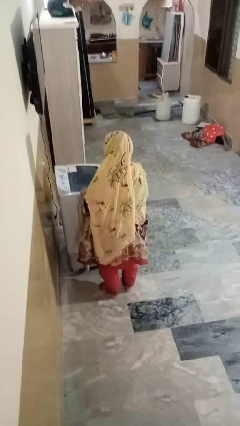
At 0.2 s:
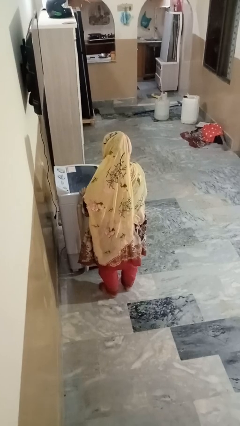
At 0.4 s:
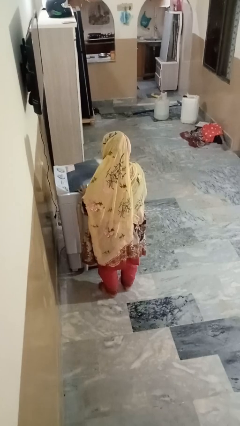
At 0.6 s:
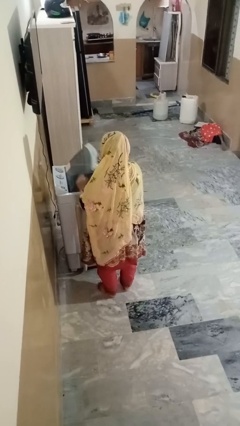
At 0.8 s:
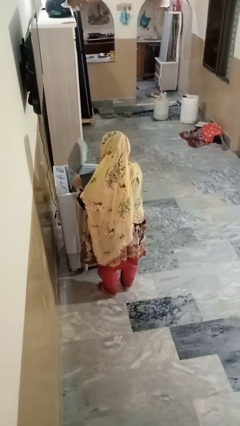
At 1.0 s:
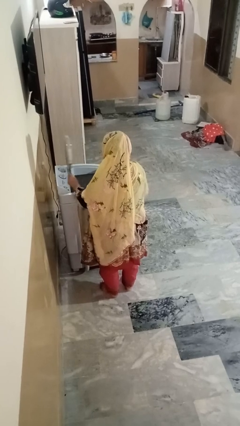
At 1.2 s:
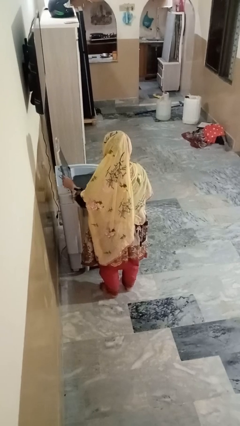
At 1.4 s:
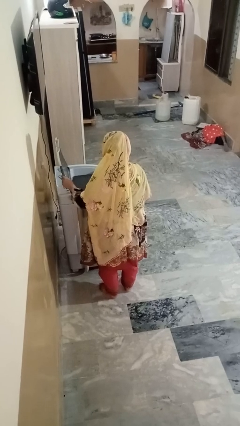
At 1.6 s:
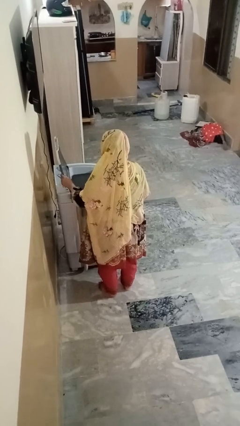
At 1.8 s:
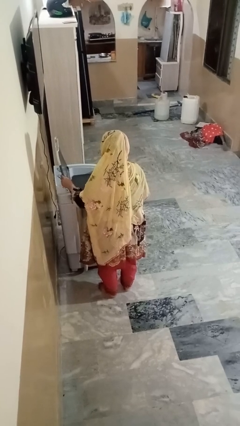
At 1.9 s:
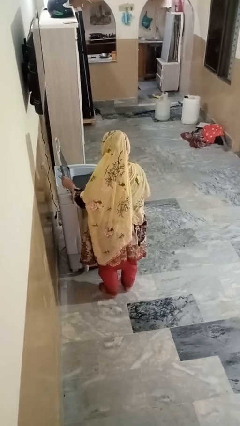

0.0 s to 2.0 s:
person opens clothes washer

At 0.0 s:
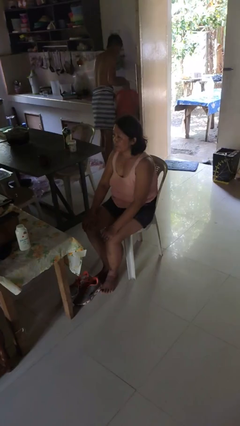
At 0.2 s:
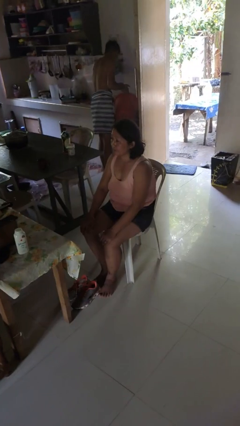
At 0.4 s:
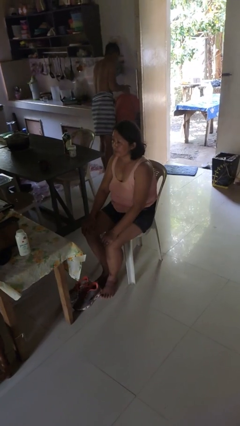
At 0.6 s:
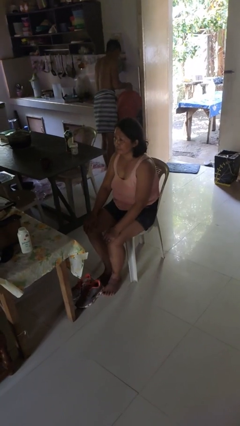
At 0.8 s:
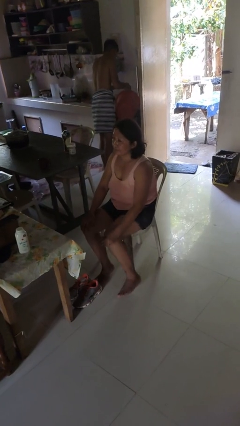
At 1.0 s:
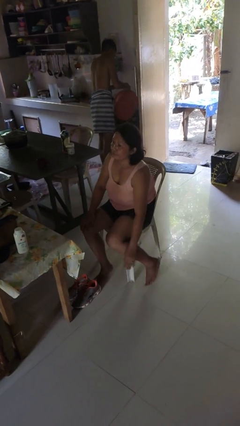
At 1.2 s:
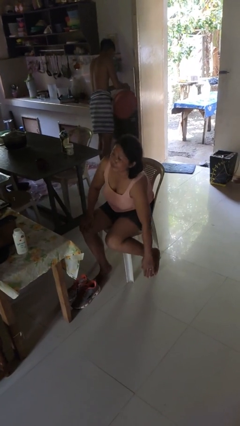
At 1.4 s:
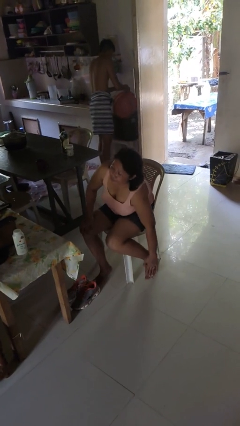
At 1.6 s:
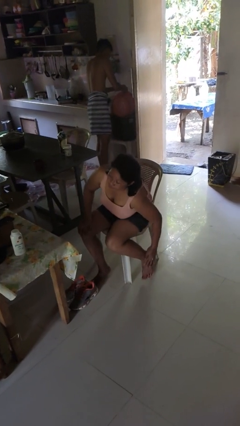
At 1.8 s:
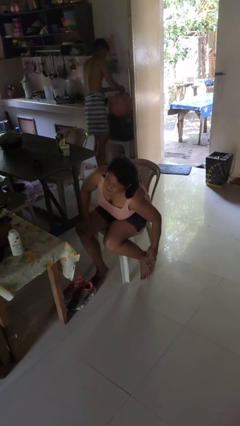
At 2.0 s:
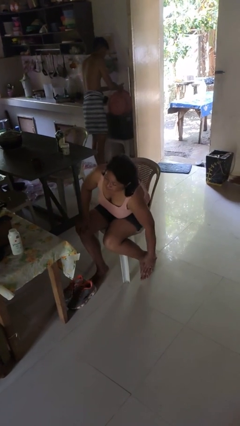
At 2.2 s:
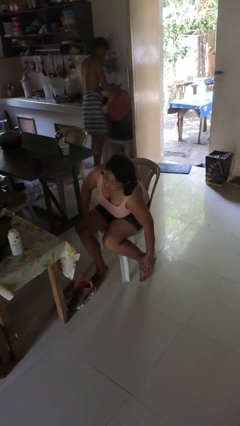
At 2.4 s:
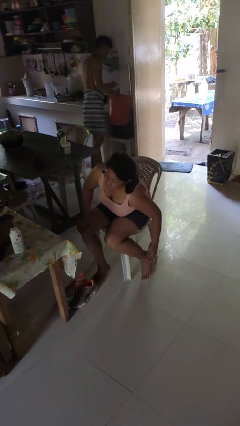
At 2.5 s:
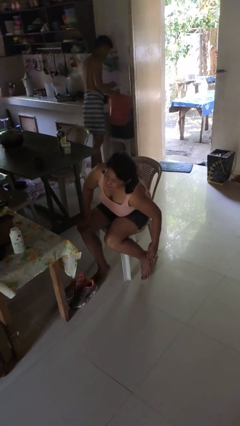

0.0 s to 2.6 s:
person rubs foot

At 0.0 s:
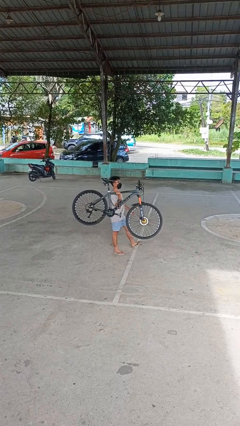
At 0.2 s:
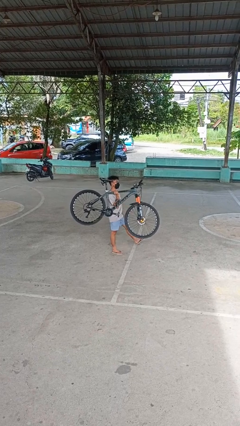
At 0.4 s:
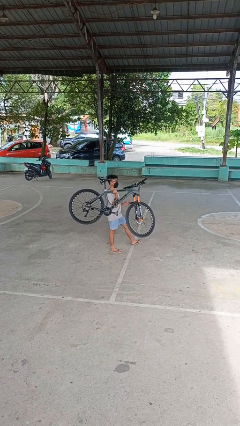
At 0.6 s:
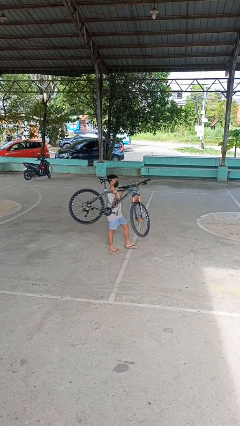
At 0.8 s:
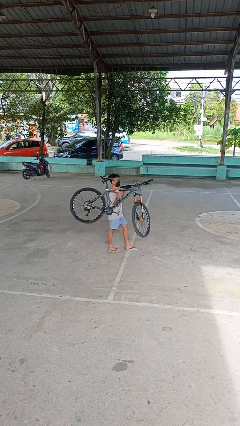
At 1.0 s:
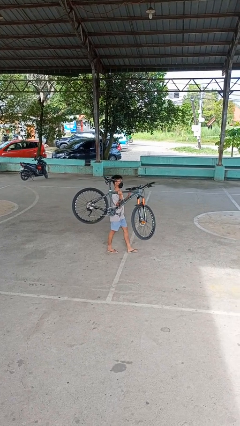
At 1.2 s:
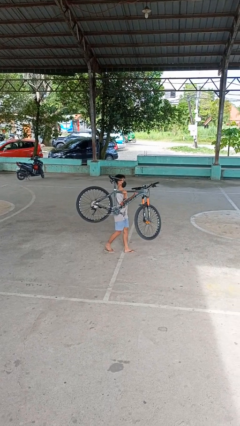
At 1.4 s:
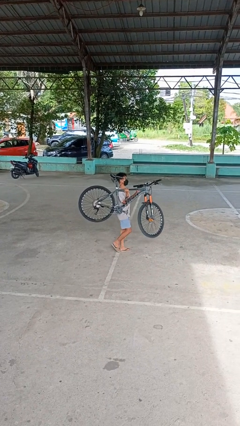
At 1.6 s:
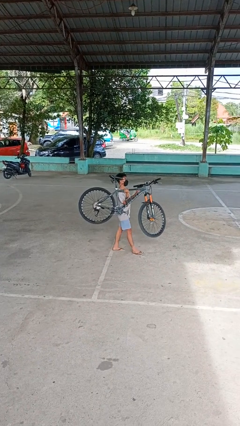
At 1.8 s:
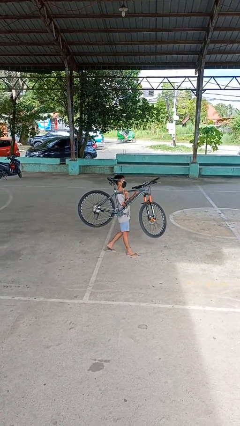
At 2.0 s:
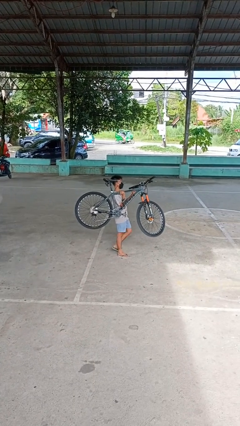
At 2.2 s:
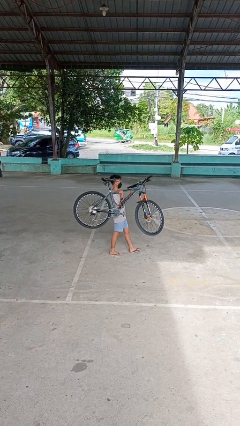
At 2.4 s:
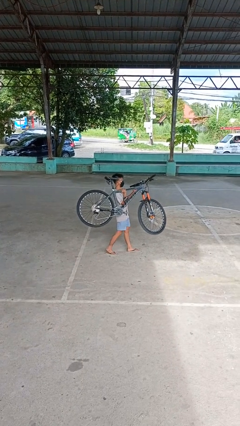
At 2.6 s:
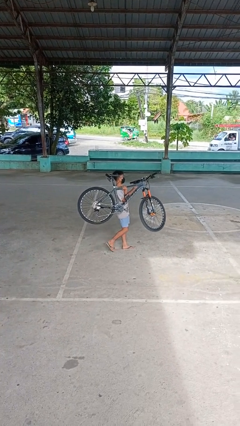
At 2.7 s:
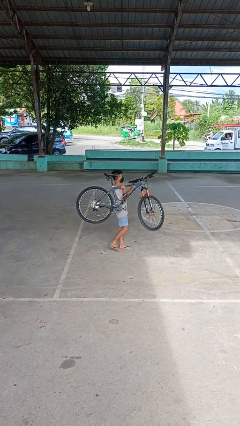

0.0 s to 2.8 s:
person carries bicycle

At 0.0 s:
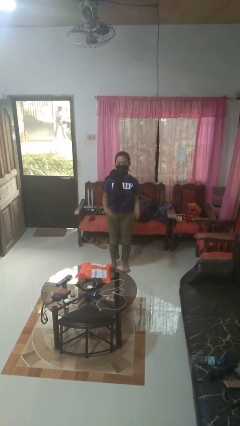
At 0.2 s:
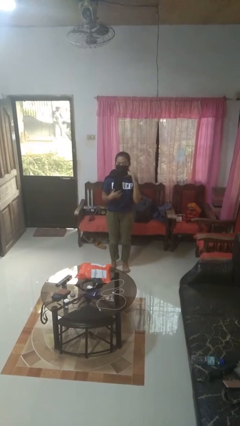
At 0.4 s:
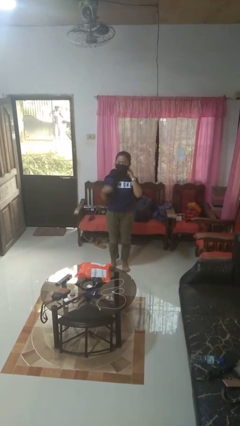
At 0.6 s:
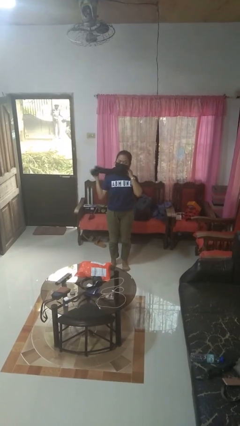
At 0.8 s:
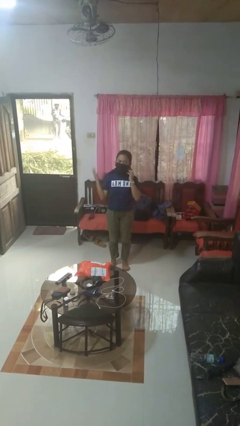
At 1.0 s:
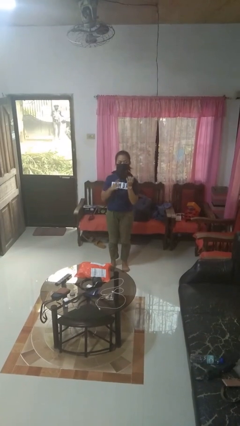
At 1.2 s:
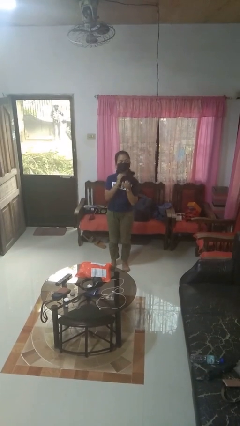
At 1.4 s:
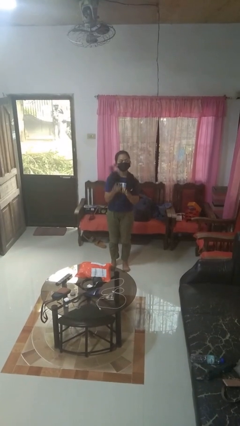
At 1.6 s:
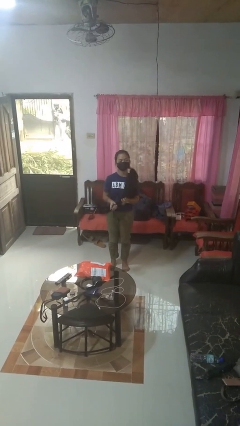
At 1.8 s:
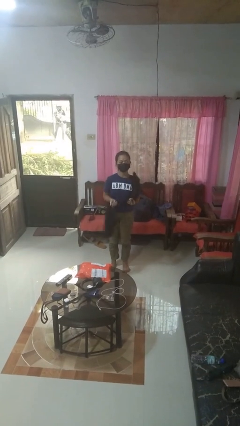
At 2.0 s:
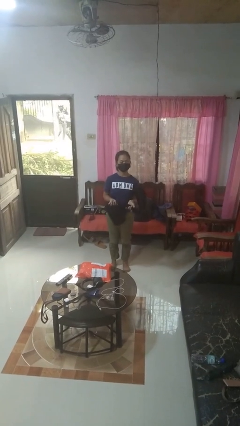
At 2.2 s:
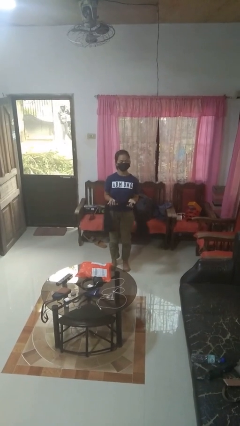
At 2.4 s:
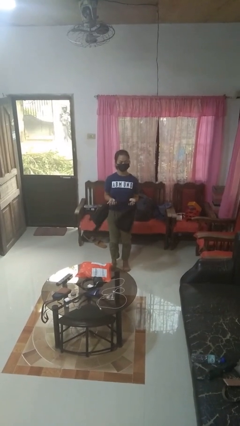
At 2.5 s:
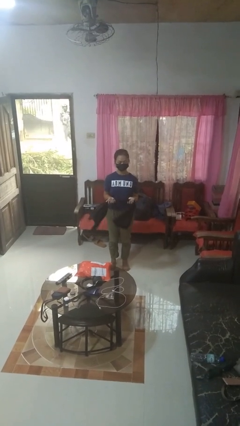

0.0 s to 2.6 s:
person takes off scarf

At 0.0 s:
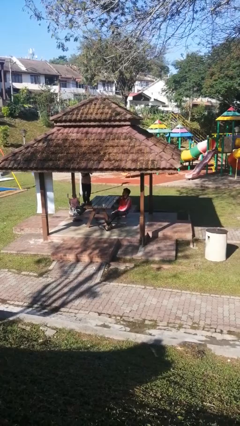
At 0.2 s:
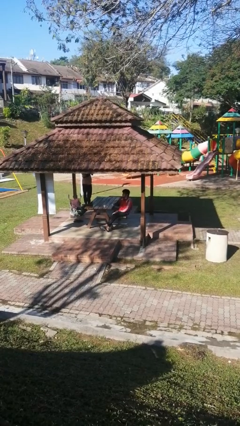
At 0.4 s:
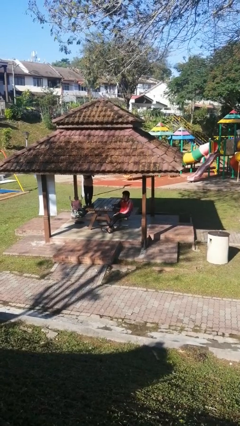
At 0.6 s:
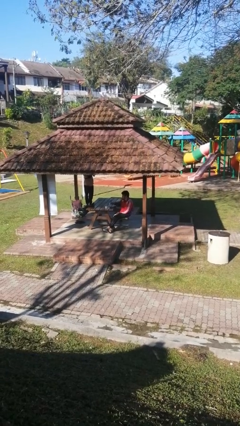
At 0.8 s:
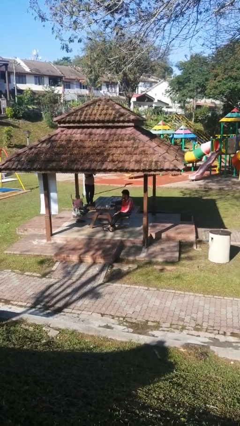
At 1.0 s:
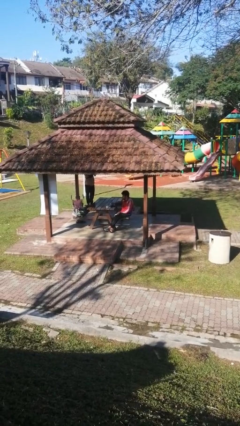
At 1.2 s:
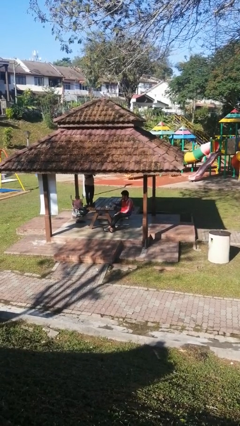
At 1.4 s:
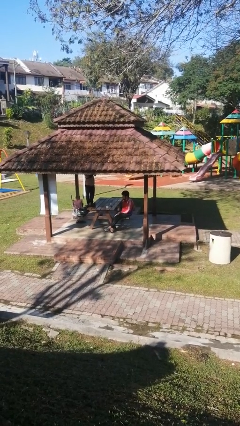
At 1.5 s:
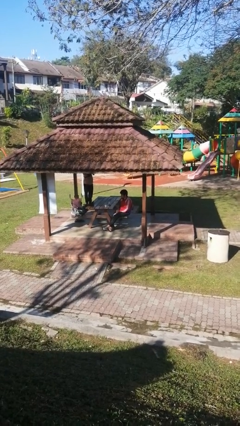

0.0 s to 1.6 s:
person puts down object on table

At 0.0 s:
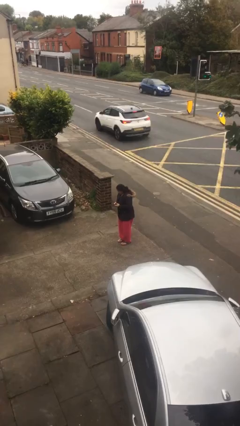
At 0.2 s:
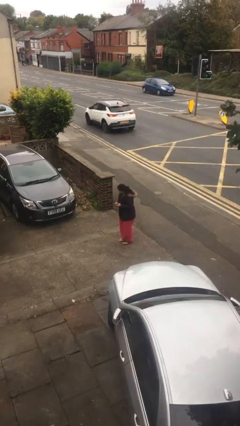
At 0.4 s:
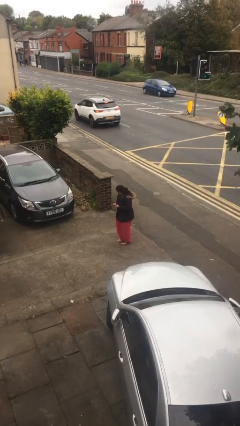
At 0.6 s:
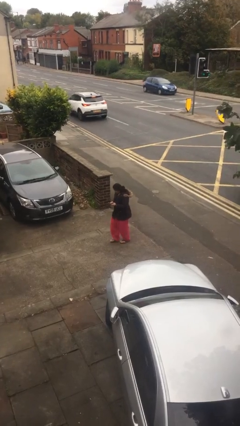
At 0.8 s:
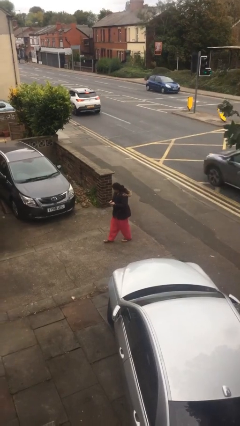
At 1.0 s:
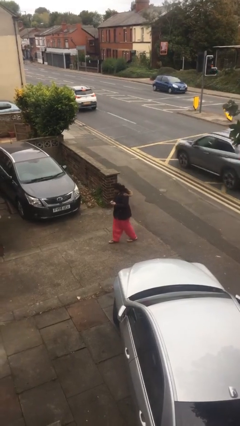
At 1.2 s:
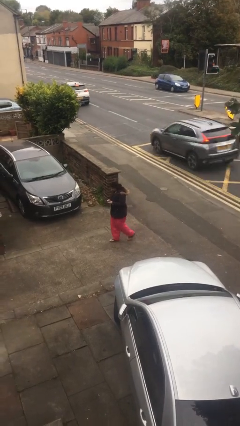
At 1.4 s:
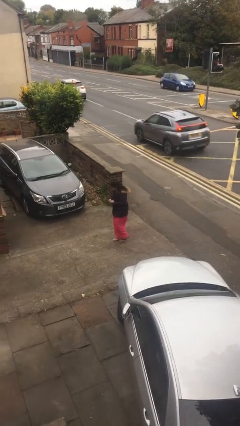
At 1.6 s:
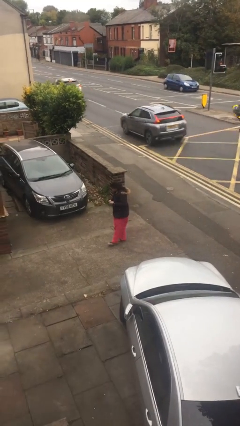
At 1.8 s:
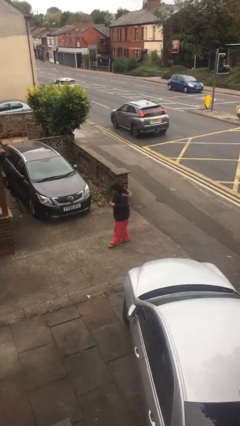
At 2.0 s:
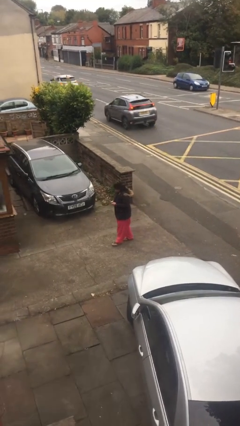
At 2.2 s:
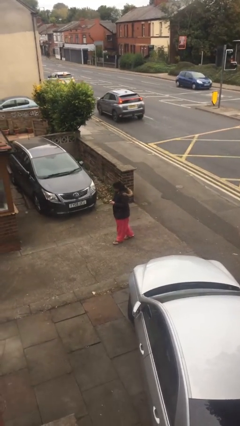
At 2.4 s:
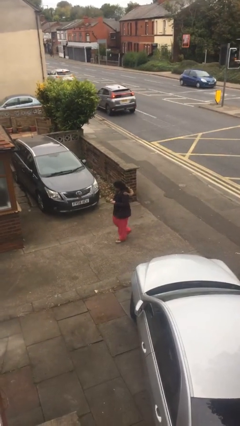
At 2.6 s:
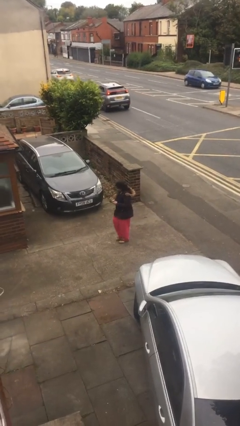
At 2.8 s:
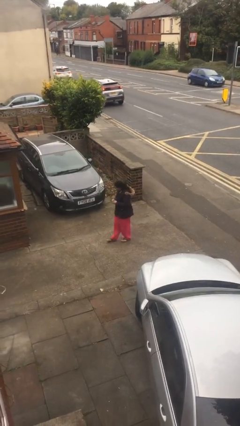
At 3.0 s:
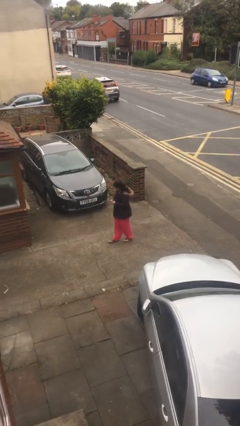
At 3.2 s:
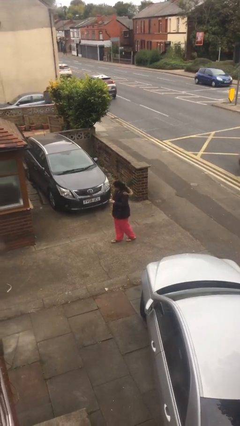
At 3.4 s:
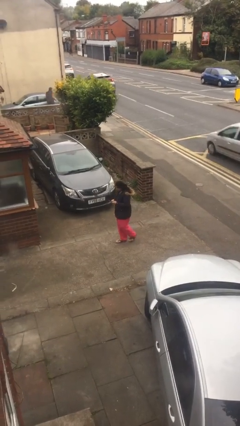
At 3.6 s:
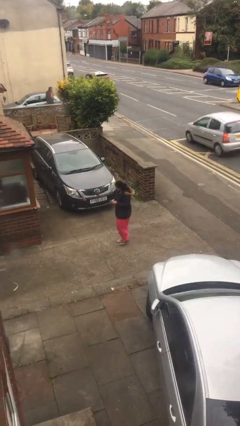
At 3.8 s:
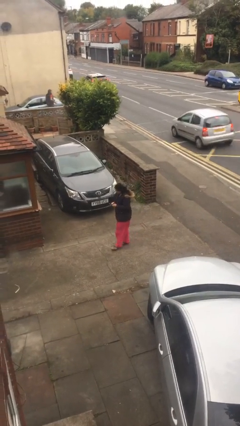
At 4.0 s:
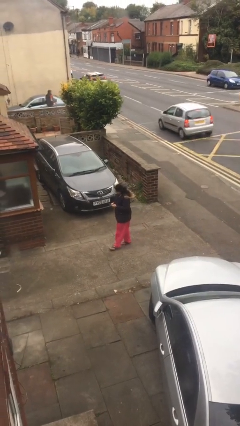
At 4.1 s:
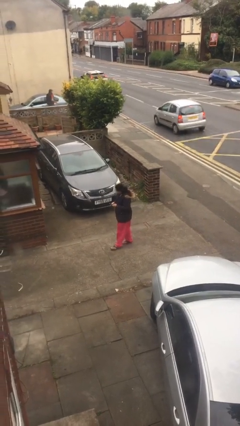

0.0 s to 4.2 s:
person texts on phone
